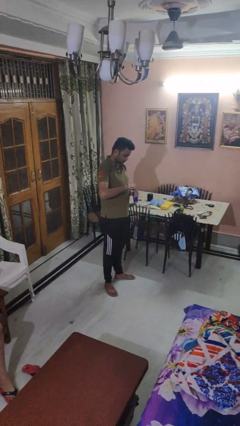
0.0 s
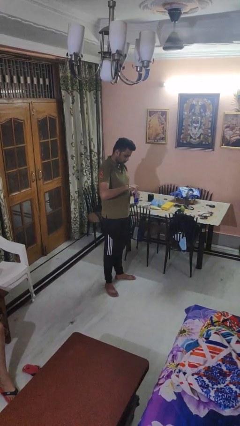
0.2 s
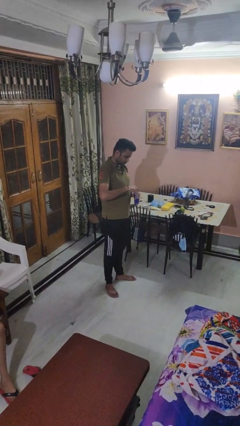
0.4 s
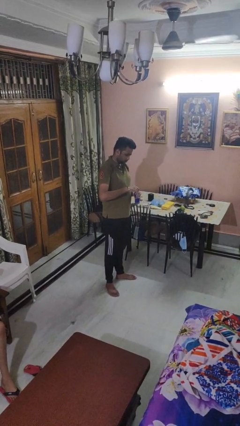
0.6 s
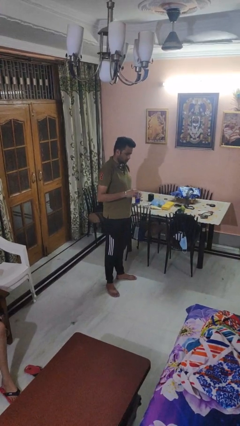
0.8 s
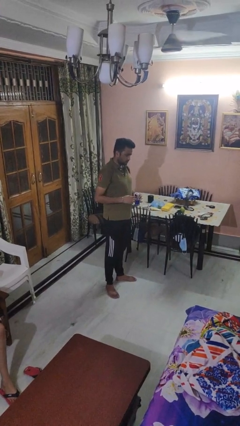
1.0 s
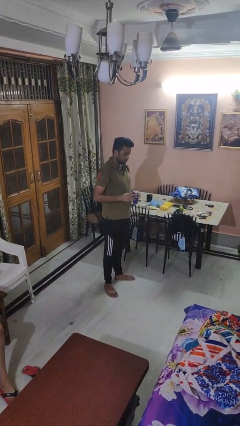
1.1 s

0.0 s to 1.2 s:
person opens beverage can

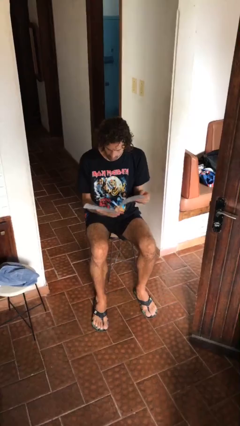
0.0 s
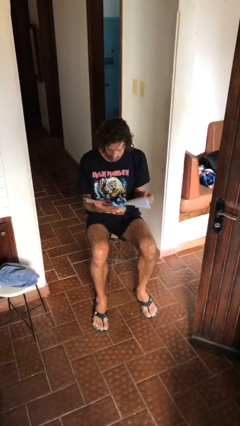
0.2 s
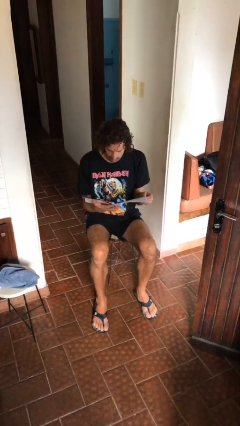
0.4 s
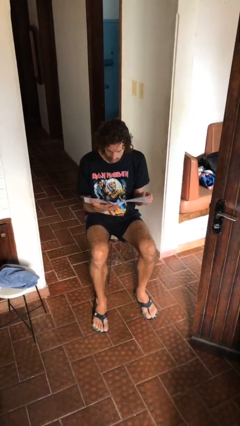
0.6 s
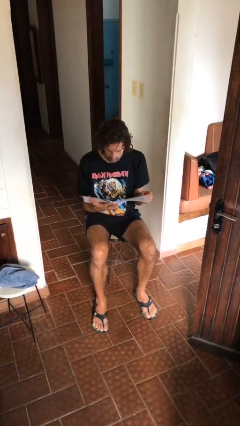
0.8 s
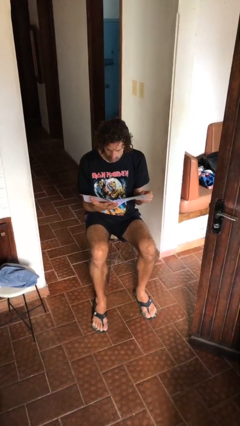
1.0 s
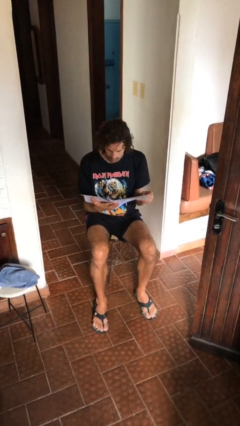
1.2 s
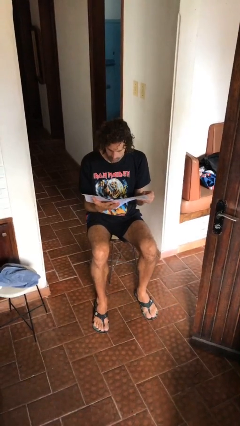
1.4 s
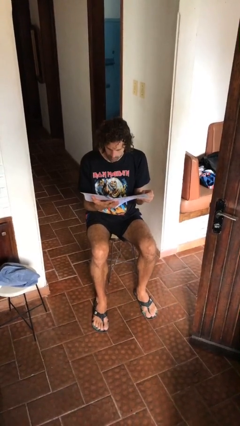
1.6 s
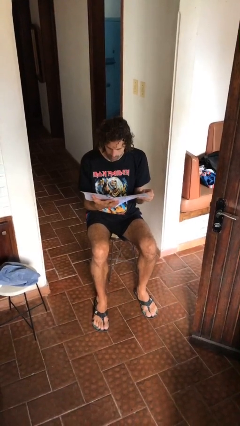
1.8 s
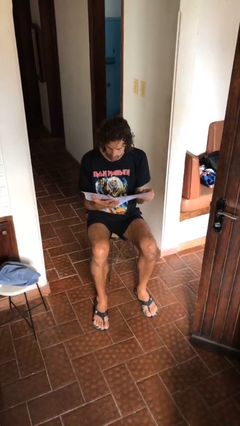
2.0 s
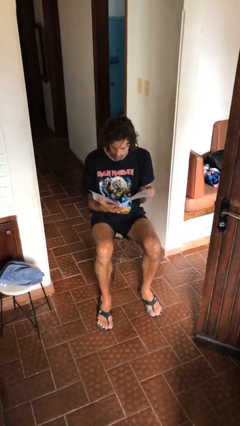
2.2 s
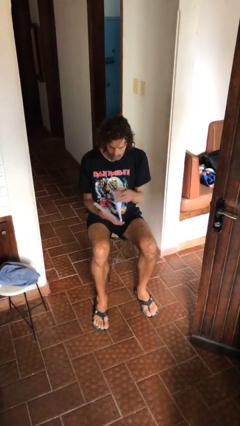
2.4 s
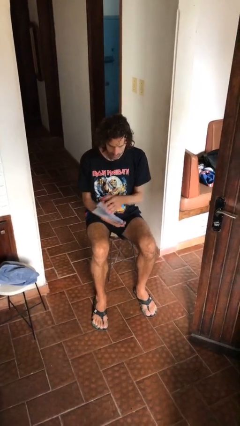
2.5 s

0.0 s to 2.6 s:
person reads document

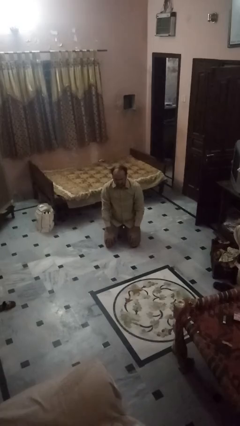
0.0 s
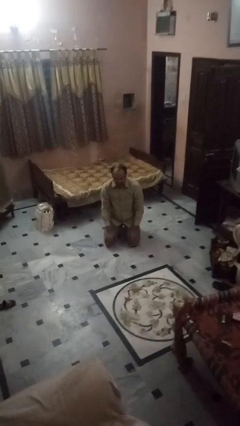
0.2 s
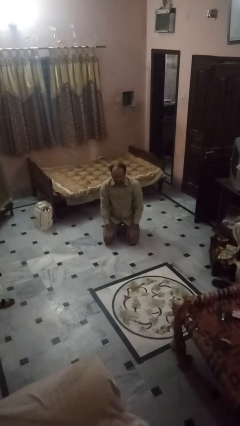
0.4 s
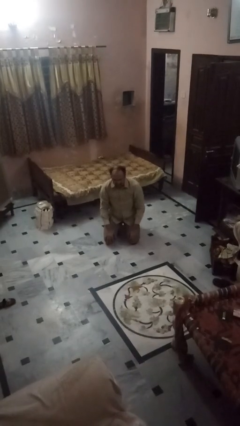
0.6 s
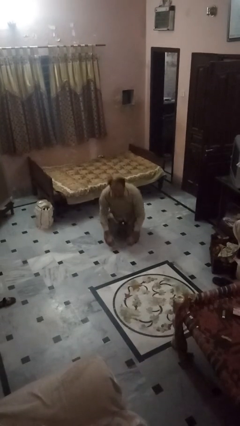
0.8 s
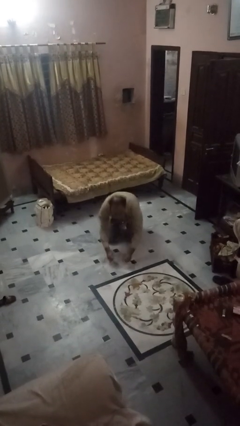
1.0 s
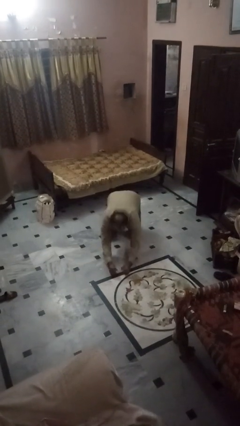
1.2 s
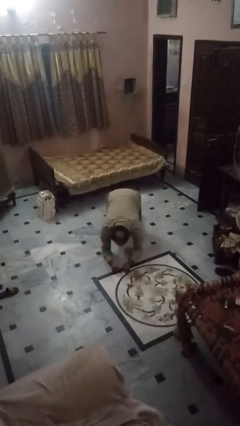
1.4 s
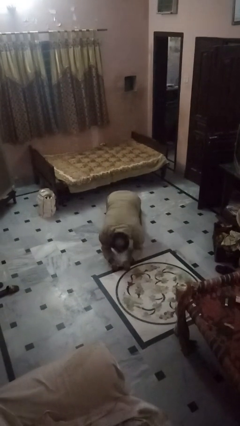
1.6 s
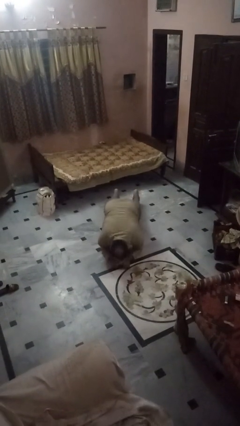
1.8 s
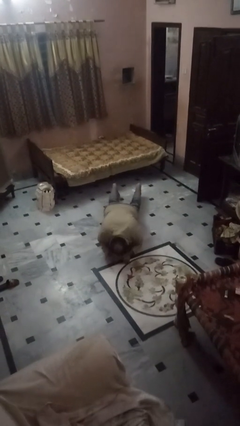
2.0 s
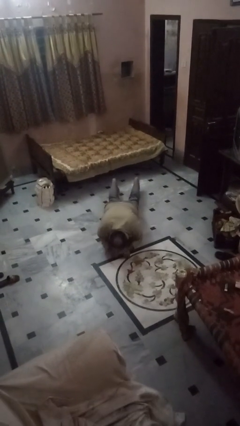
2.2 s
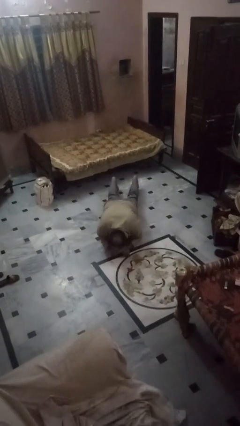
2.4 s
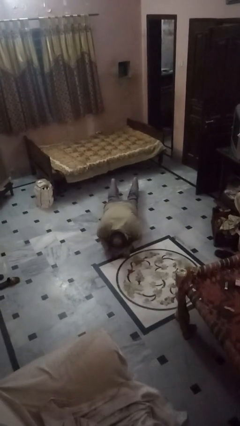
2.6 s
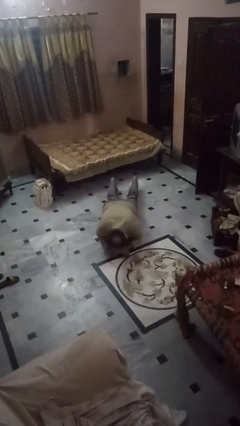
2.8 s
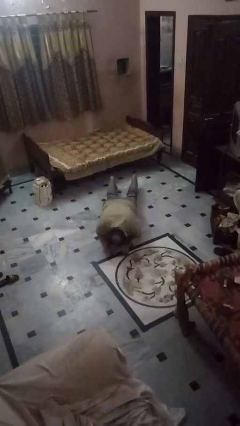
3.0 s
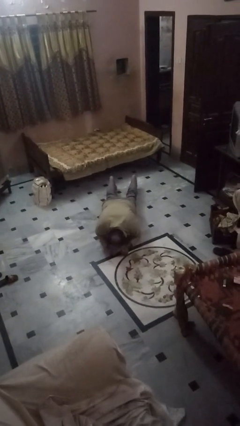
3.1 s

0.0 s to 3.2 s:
person exercises with plank

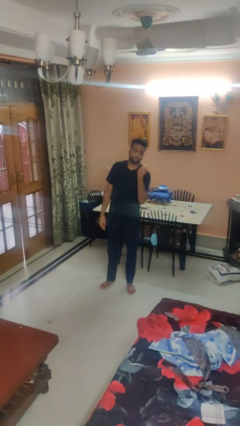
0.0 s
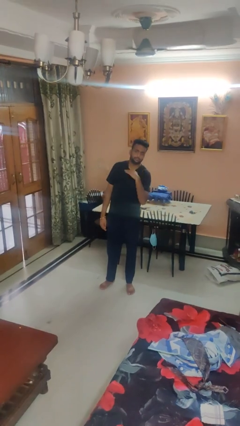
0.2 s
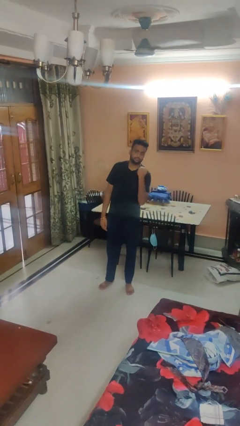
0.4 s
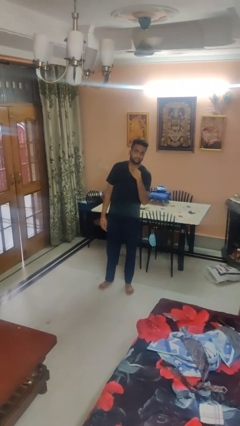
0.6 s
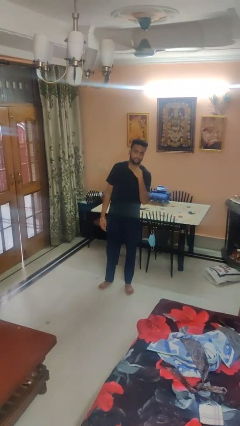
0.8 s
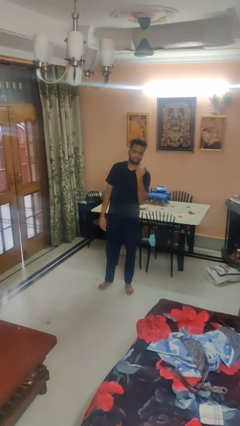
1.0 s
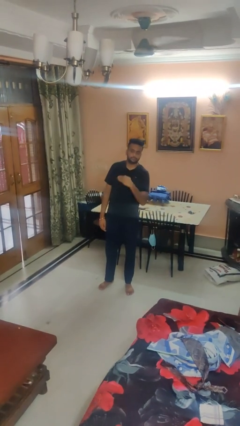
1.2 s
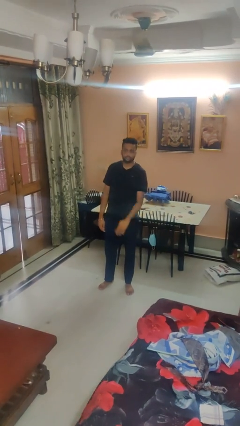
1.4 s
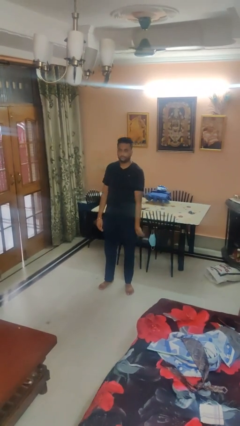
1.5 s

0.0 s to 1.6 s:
person gestures cut

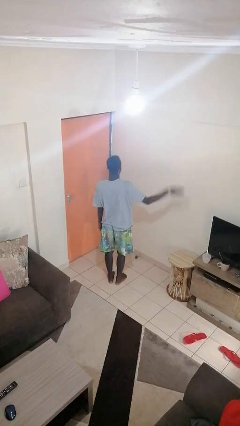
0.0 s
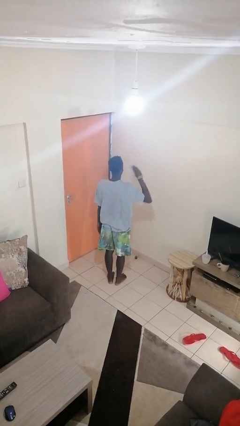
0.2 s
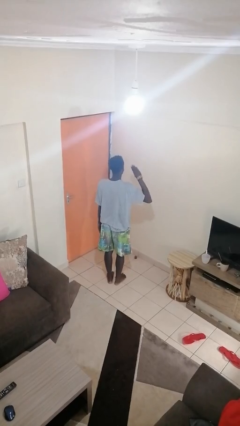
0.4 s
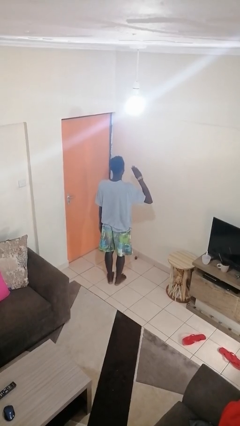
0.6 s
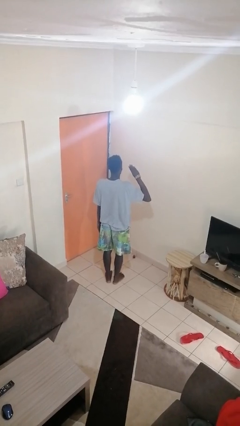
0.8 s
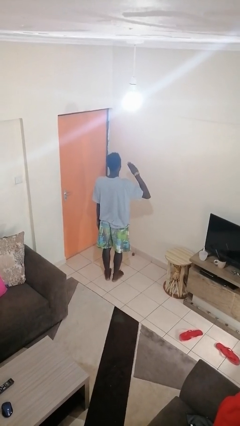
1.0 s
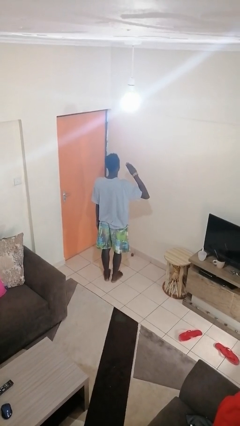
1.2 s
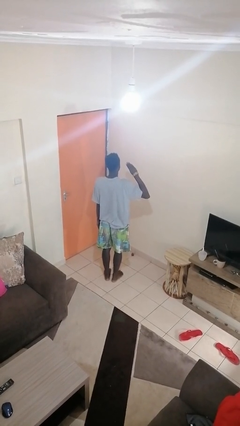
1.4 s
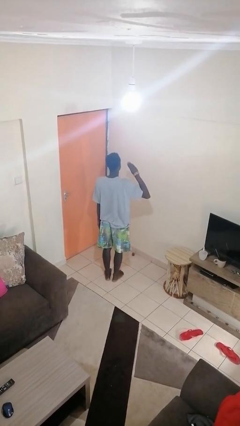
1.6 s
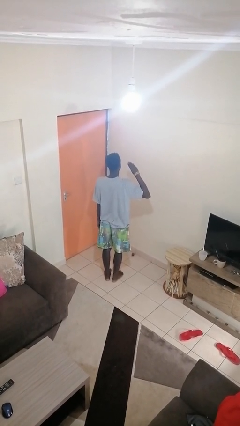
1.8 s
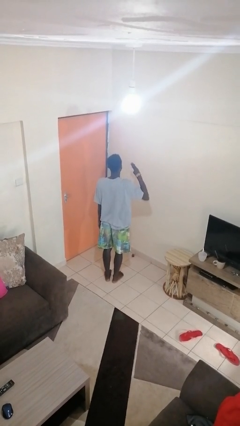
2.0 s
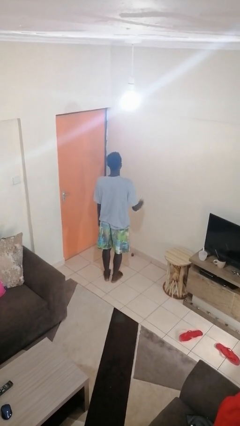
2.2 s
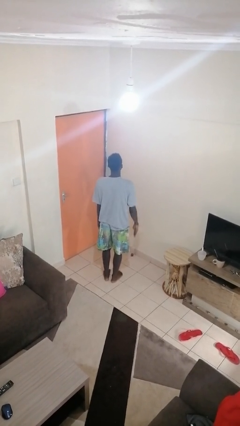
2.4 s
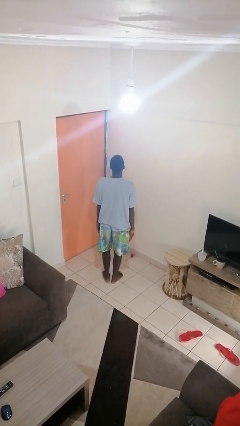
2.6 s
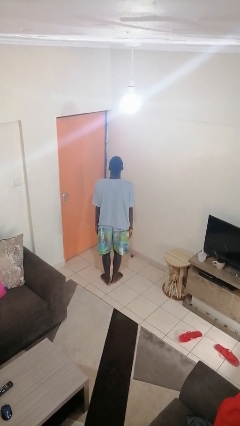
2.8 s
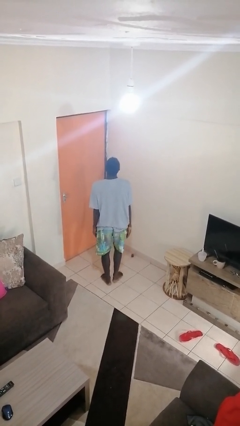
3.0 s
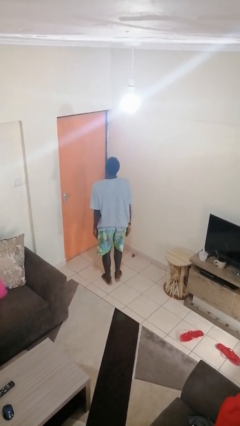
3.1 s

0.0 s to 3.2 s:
person salutes

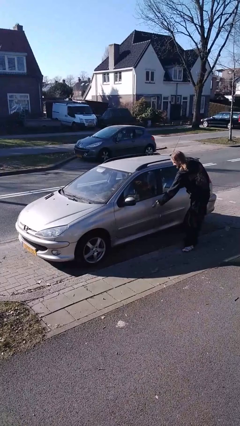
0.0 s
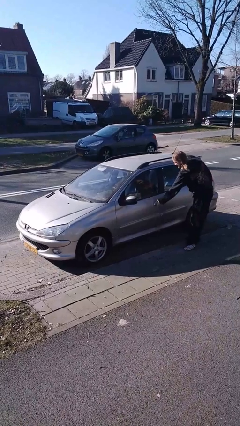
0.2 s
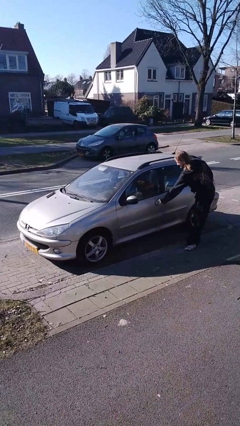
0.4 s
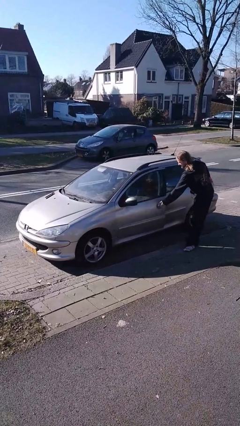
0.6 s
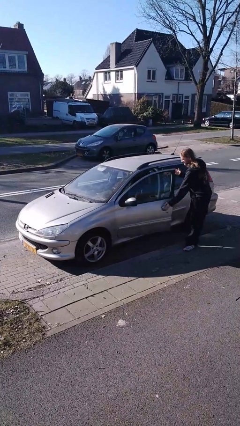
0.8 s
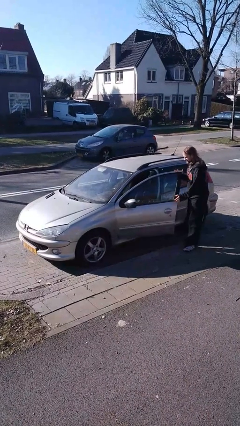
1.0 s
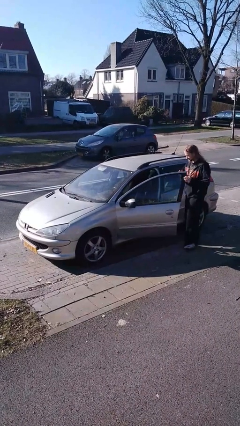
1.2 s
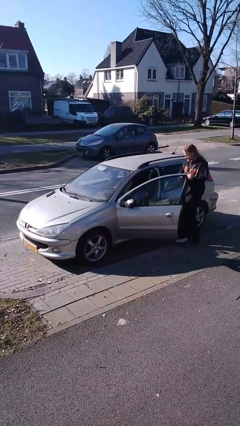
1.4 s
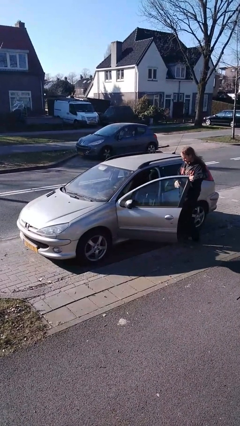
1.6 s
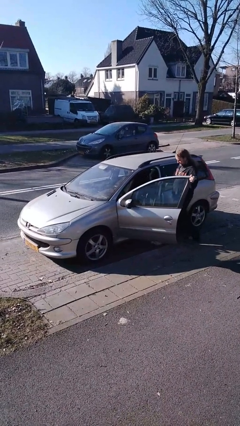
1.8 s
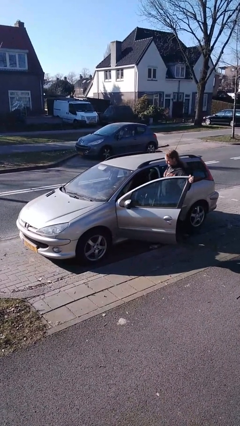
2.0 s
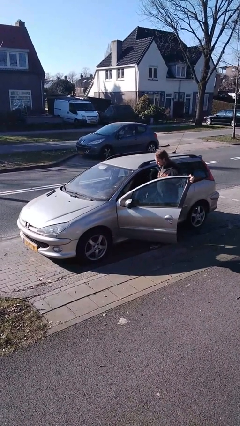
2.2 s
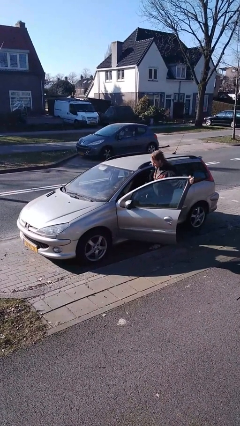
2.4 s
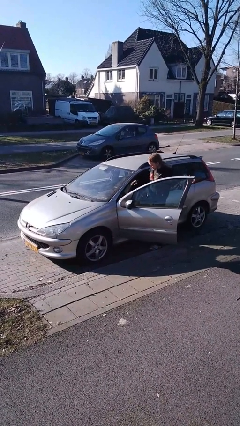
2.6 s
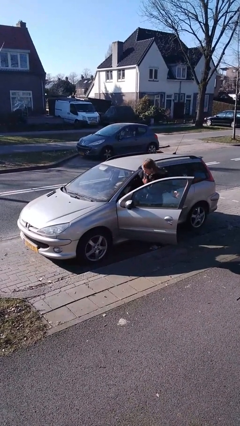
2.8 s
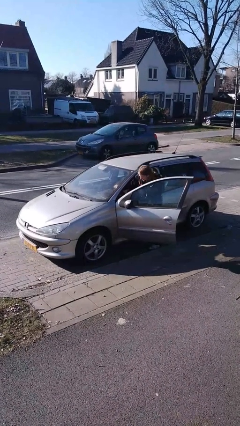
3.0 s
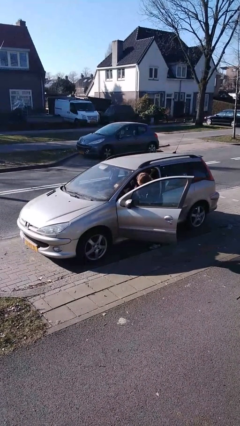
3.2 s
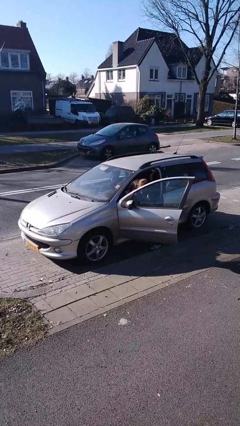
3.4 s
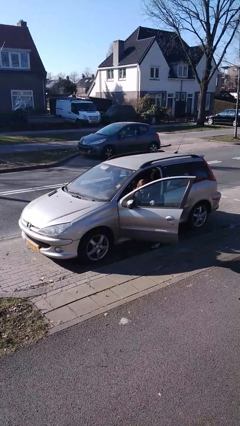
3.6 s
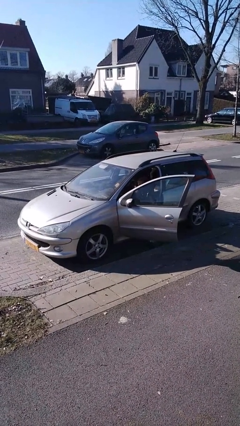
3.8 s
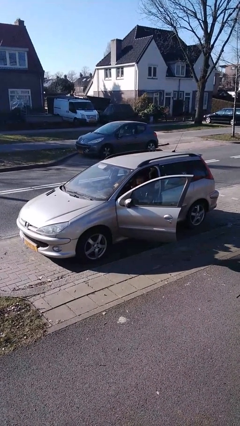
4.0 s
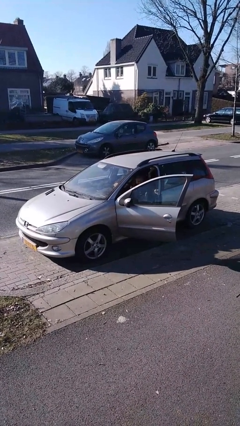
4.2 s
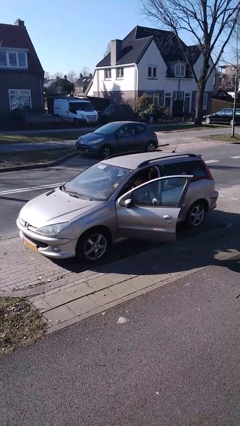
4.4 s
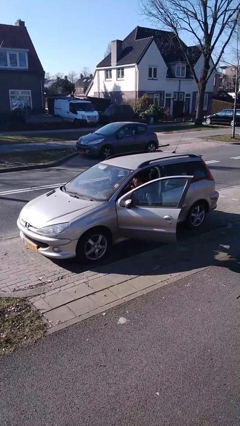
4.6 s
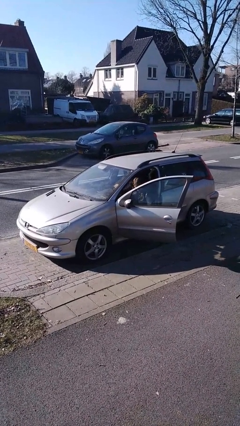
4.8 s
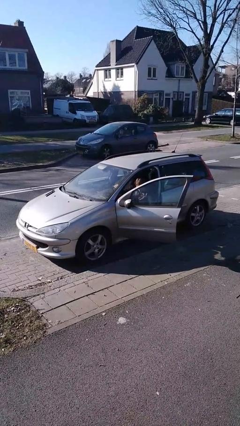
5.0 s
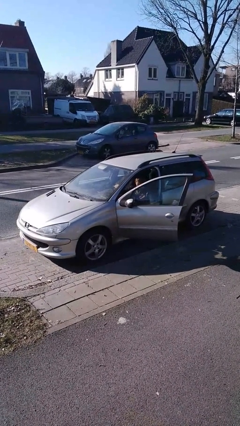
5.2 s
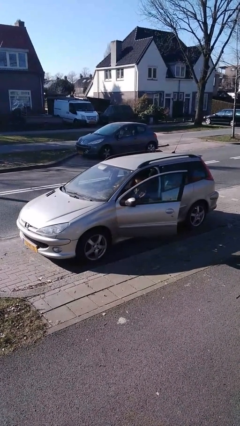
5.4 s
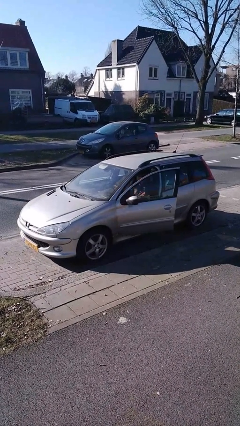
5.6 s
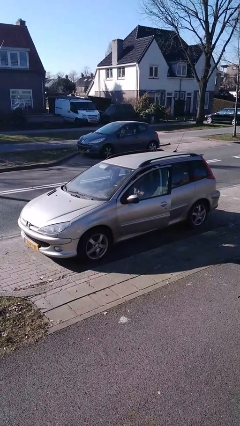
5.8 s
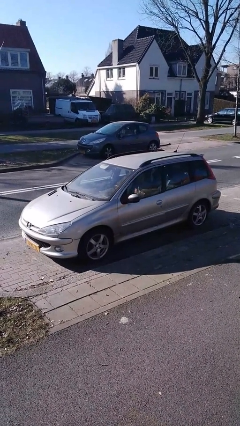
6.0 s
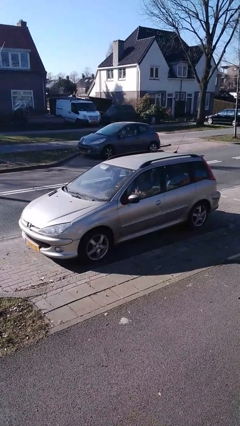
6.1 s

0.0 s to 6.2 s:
car picks up person
